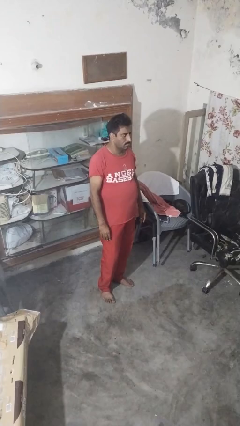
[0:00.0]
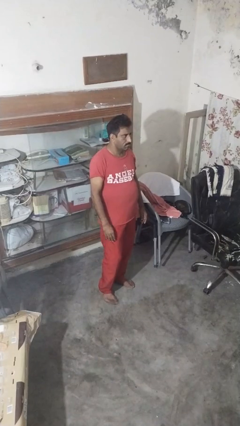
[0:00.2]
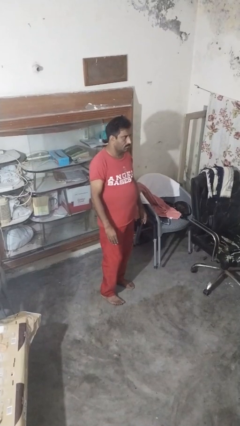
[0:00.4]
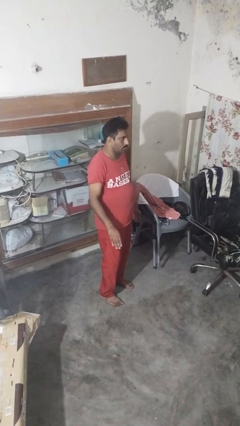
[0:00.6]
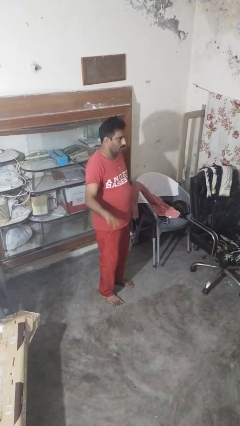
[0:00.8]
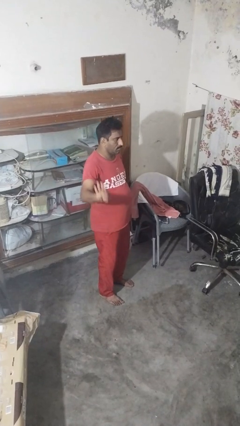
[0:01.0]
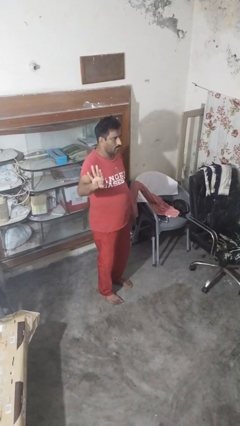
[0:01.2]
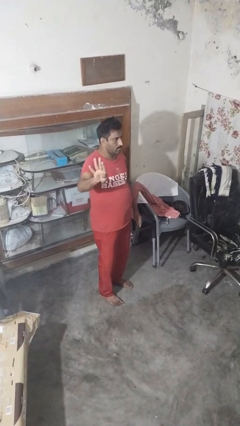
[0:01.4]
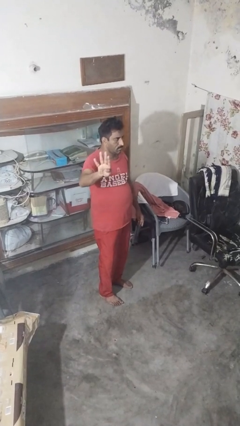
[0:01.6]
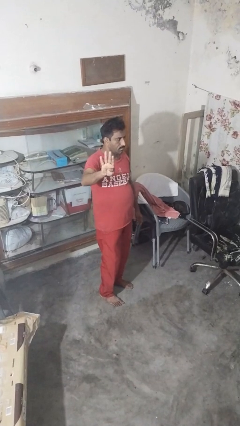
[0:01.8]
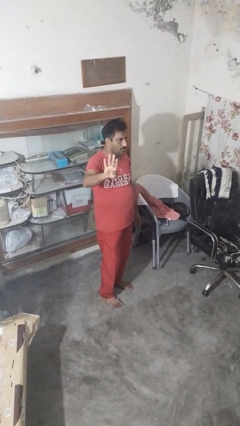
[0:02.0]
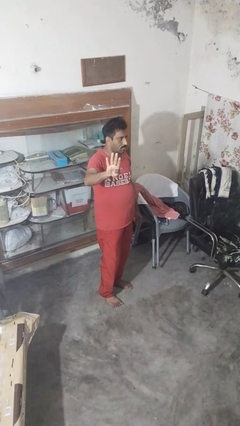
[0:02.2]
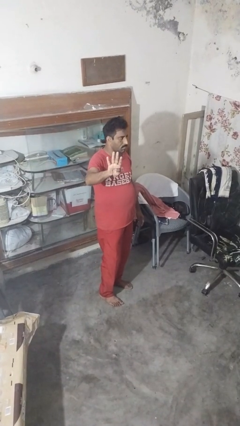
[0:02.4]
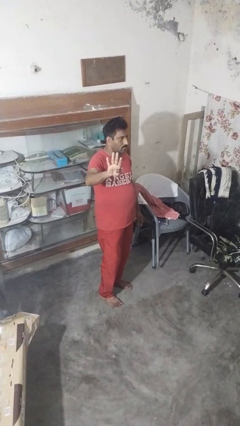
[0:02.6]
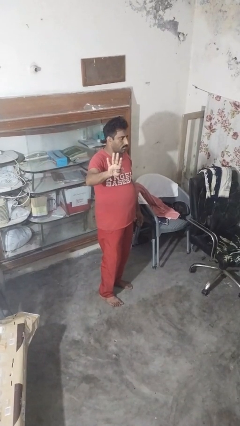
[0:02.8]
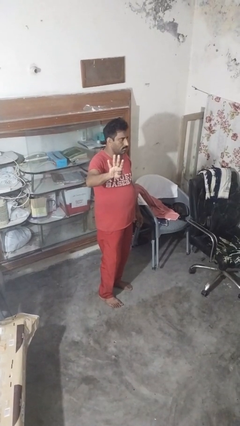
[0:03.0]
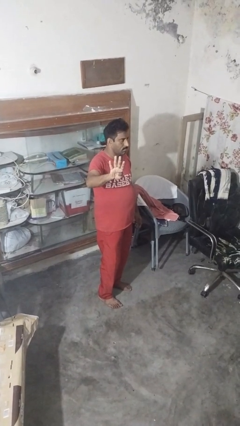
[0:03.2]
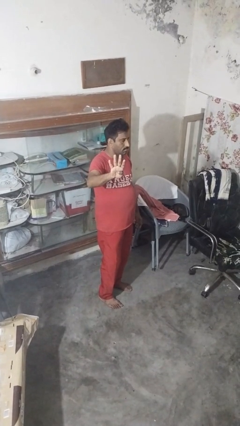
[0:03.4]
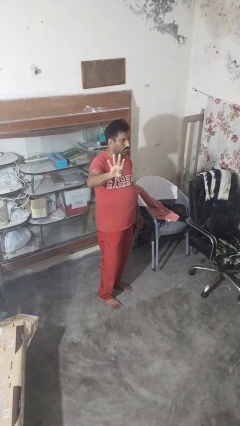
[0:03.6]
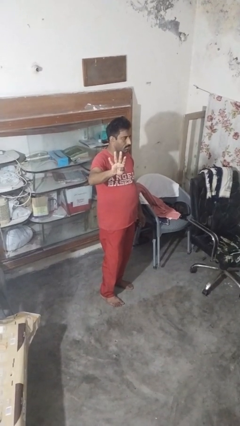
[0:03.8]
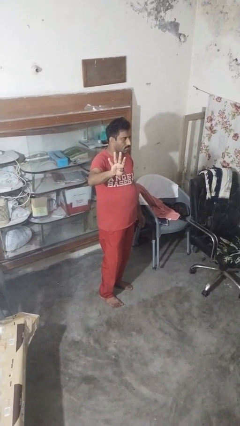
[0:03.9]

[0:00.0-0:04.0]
person gestures number four

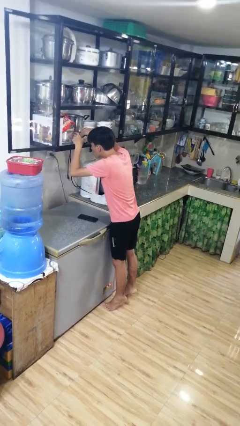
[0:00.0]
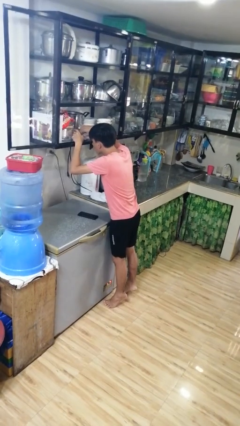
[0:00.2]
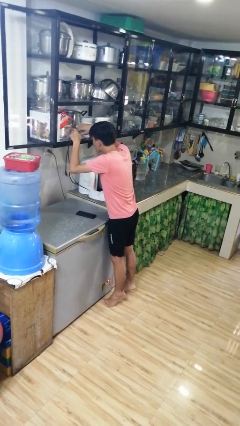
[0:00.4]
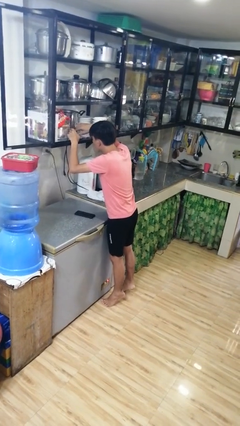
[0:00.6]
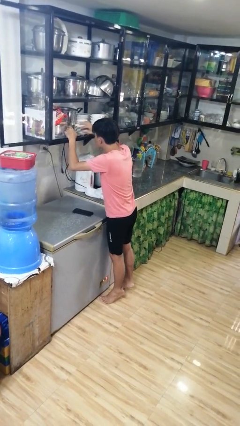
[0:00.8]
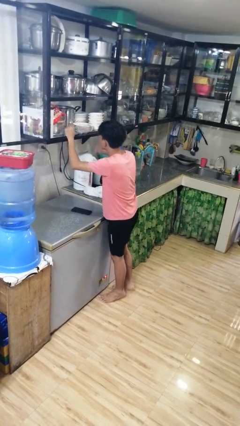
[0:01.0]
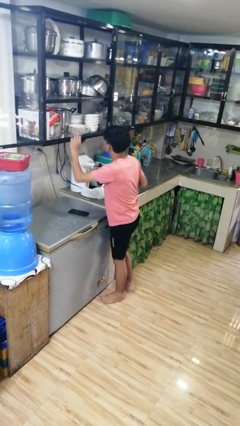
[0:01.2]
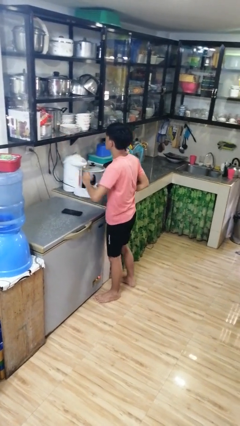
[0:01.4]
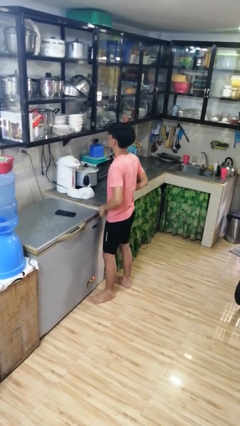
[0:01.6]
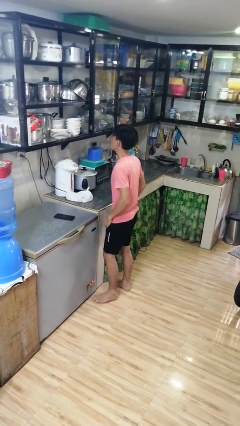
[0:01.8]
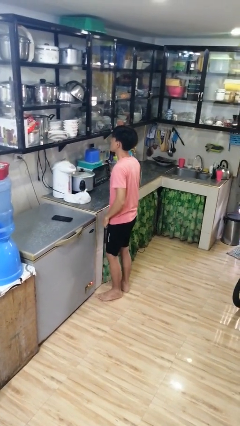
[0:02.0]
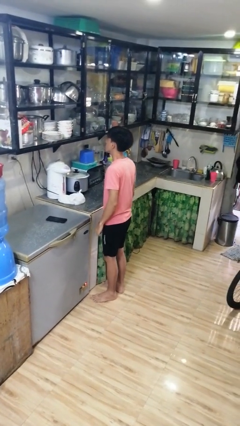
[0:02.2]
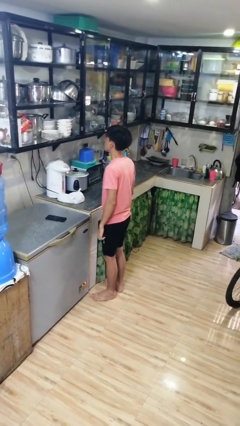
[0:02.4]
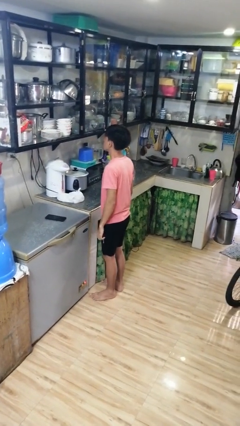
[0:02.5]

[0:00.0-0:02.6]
person takes off backpack

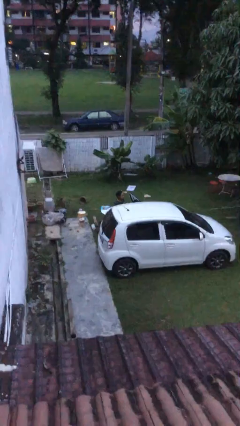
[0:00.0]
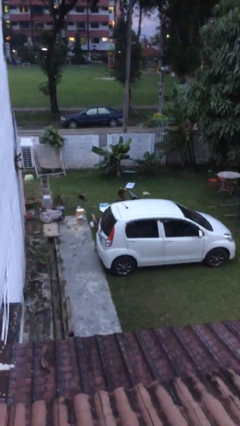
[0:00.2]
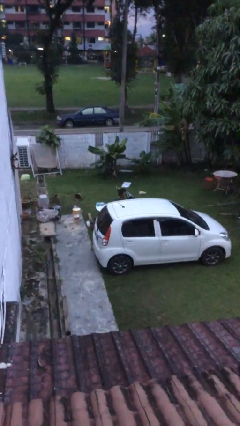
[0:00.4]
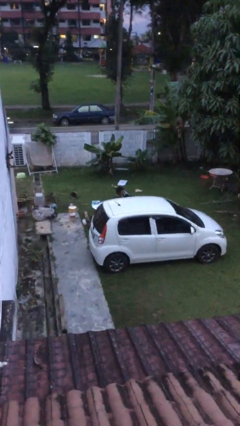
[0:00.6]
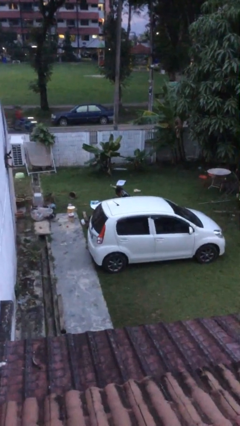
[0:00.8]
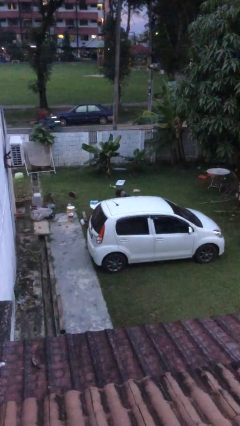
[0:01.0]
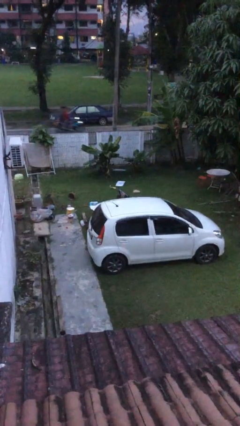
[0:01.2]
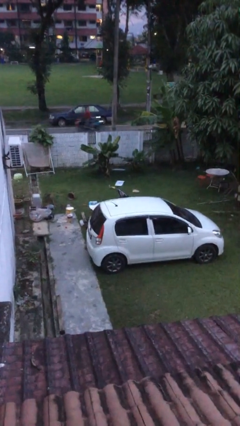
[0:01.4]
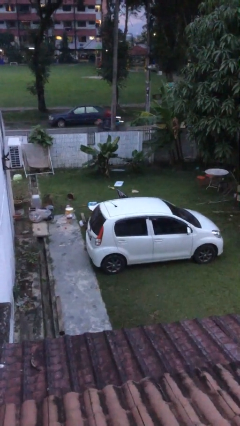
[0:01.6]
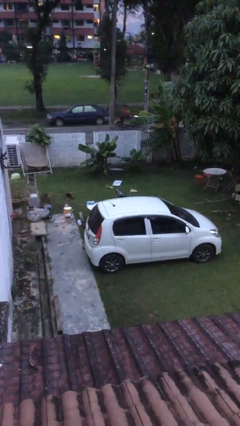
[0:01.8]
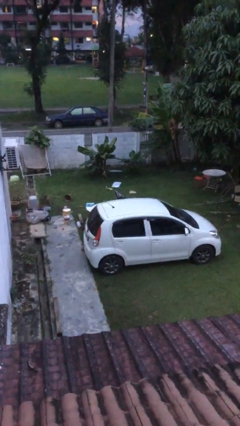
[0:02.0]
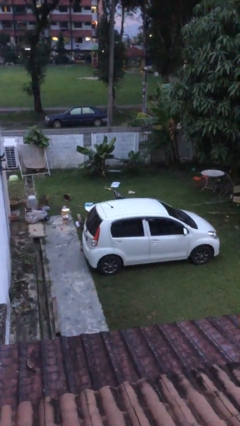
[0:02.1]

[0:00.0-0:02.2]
person enters car

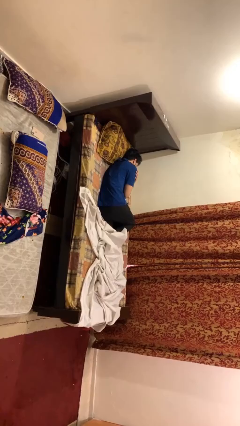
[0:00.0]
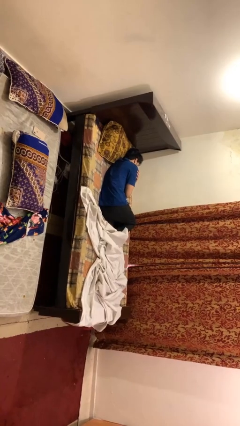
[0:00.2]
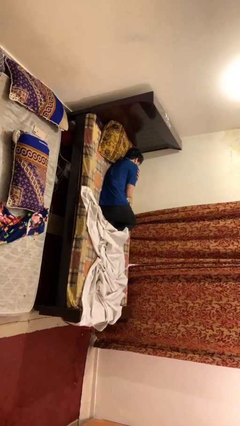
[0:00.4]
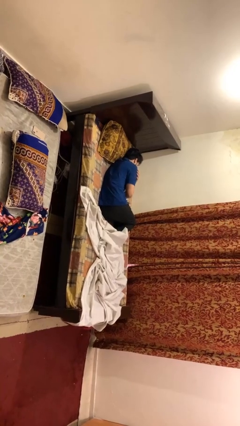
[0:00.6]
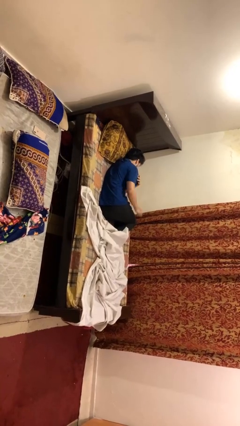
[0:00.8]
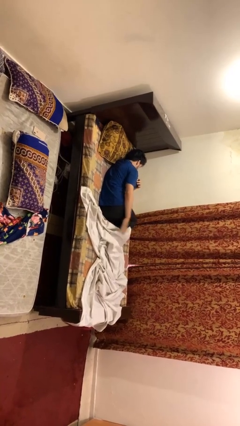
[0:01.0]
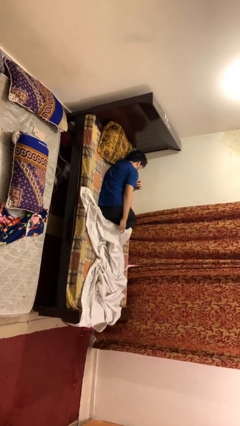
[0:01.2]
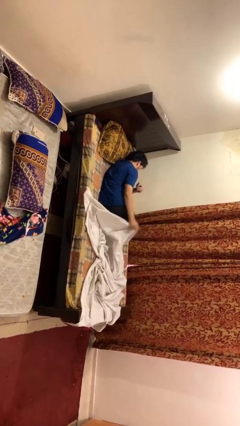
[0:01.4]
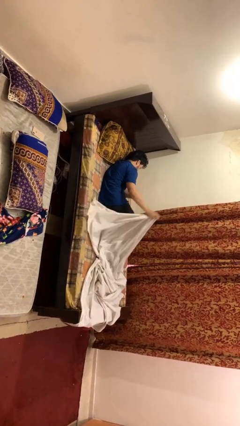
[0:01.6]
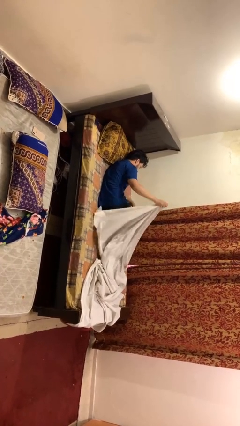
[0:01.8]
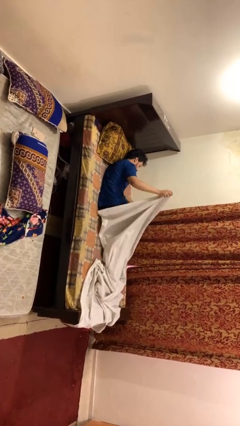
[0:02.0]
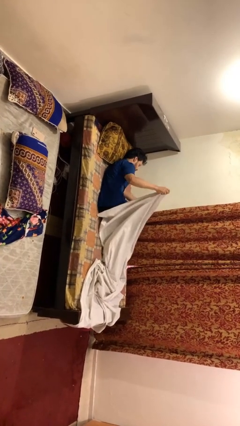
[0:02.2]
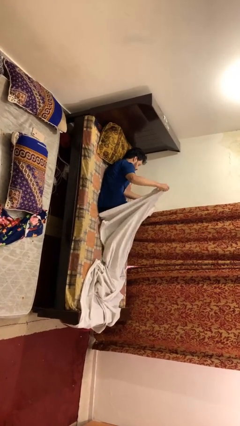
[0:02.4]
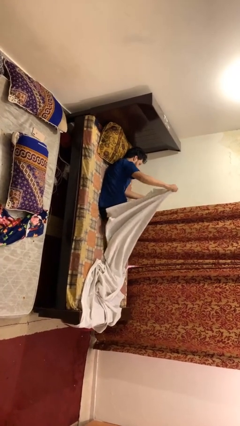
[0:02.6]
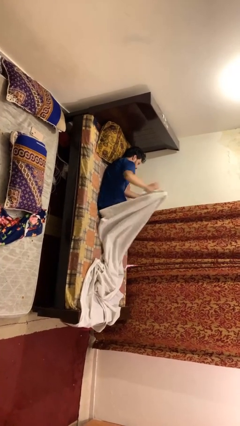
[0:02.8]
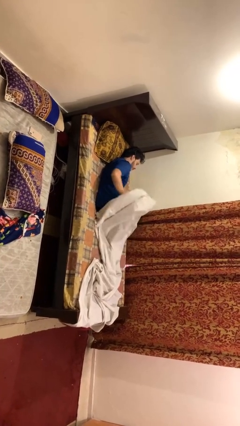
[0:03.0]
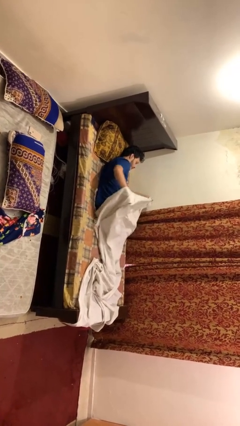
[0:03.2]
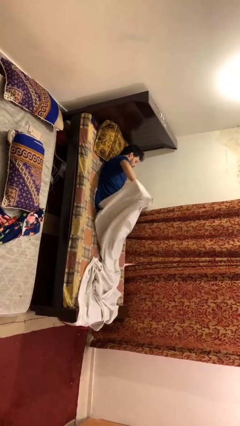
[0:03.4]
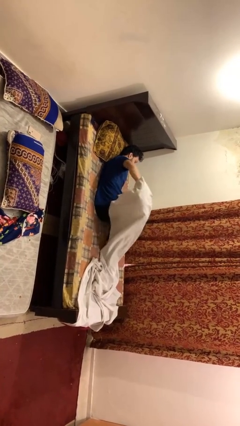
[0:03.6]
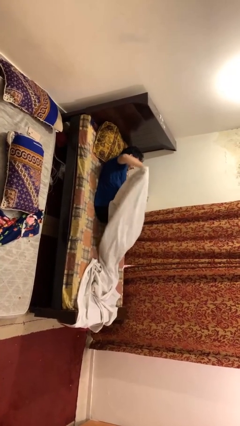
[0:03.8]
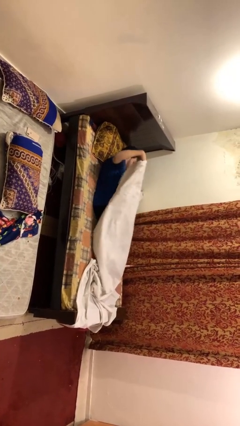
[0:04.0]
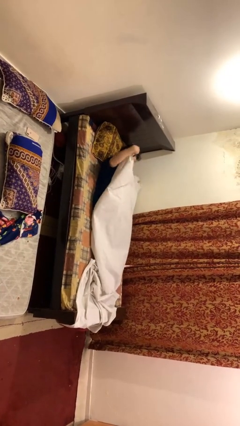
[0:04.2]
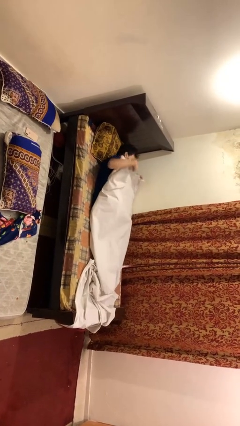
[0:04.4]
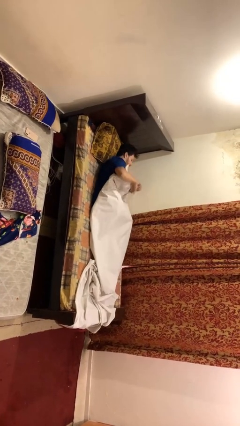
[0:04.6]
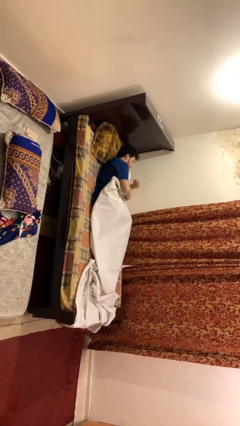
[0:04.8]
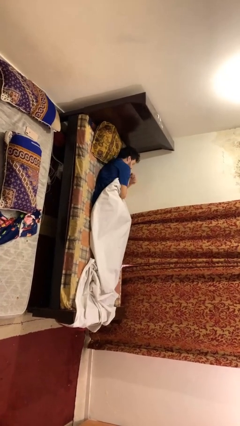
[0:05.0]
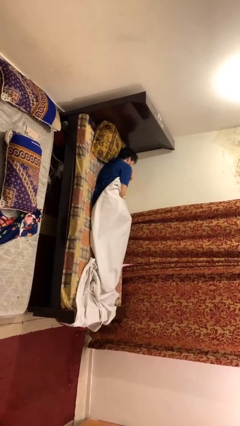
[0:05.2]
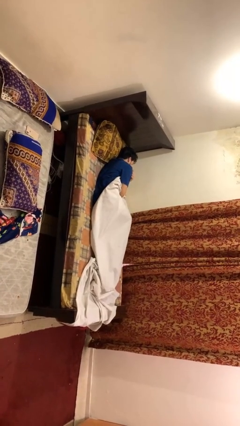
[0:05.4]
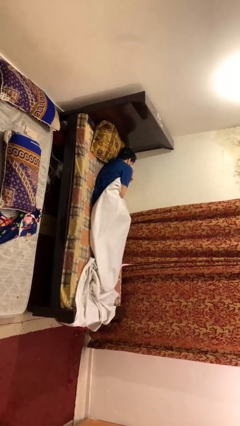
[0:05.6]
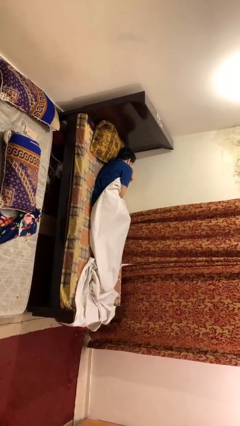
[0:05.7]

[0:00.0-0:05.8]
person covers with bedsheets

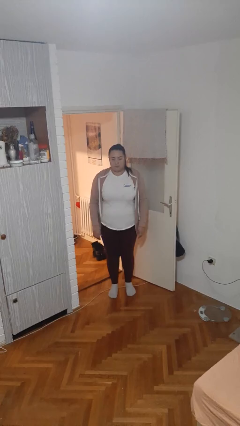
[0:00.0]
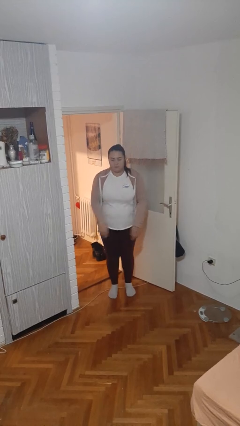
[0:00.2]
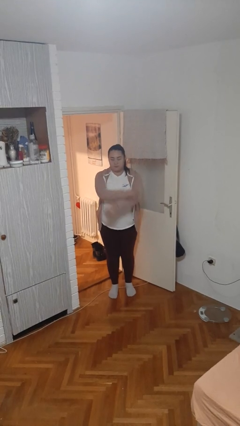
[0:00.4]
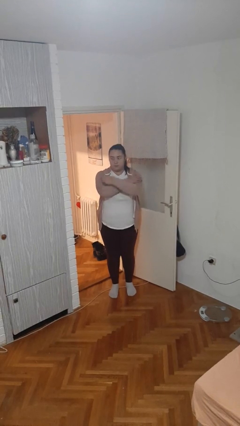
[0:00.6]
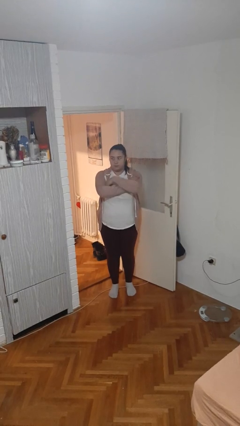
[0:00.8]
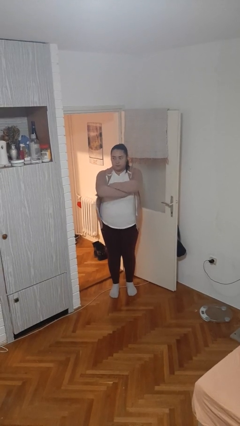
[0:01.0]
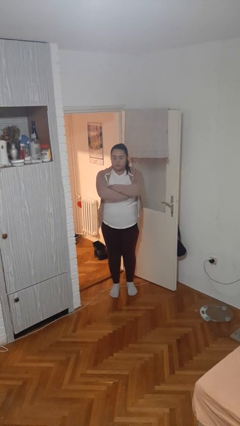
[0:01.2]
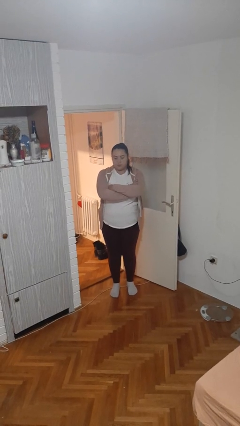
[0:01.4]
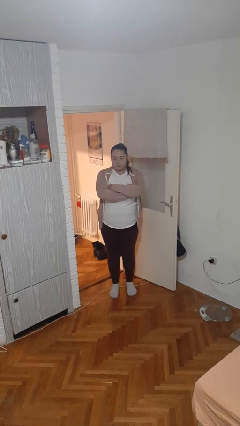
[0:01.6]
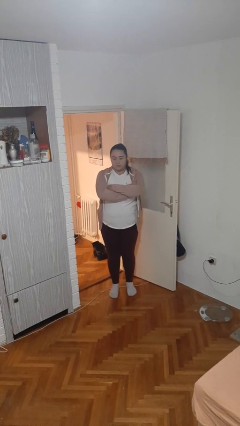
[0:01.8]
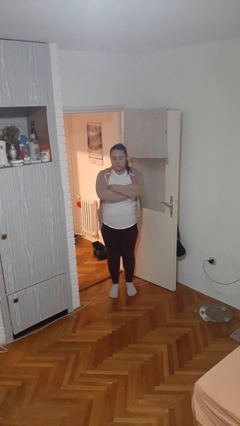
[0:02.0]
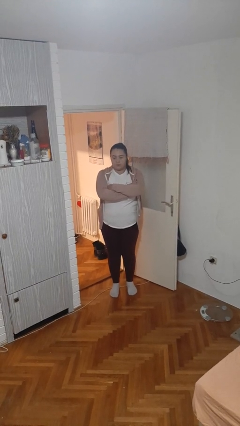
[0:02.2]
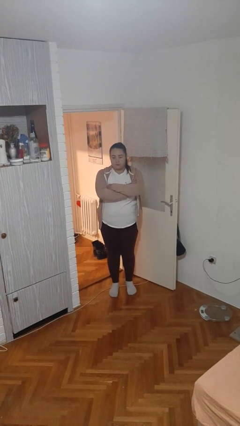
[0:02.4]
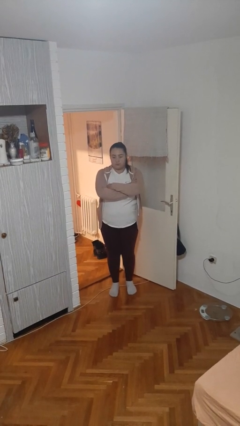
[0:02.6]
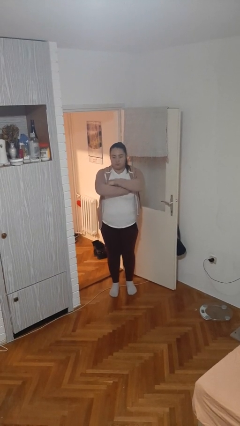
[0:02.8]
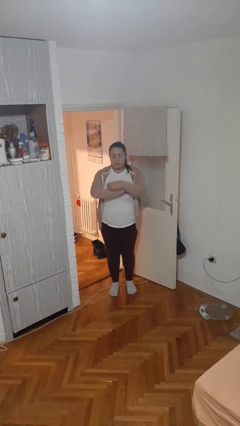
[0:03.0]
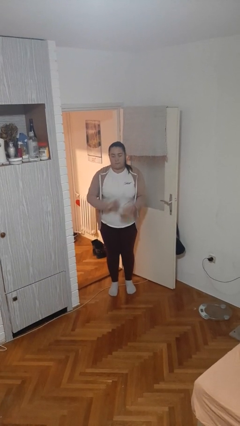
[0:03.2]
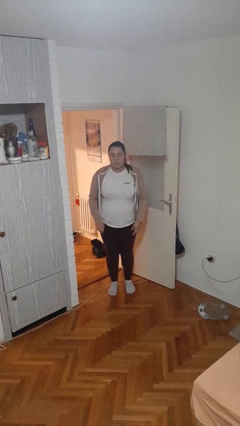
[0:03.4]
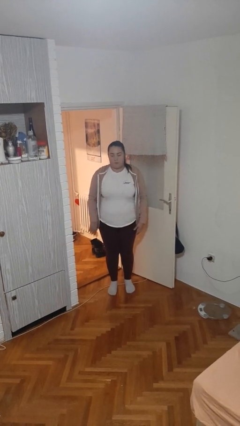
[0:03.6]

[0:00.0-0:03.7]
person crosses arms
